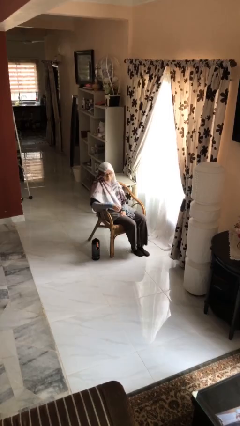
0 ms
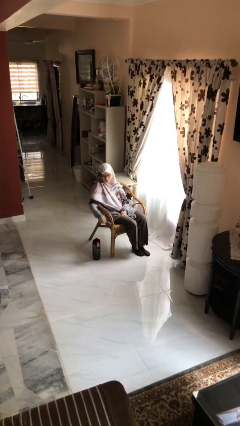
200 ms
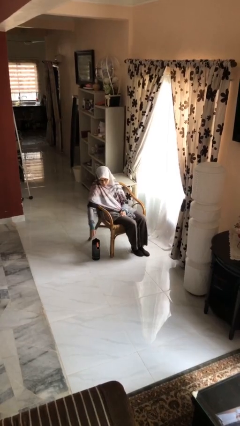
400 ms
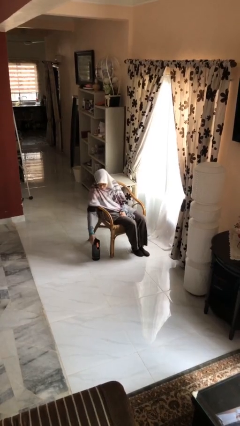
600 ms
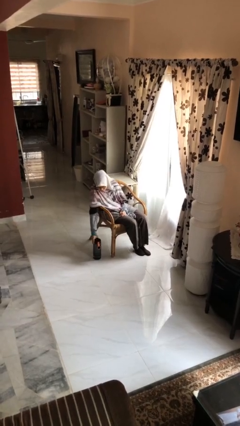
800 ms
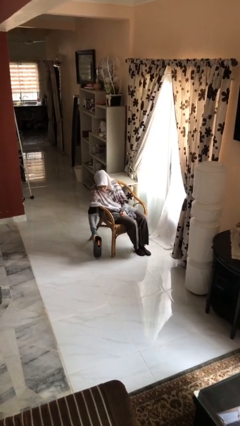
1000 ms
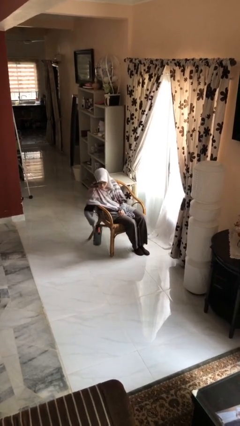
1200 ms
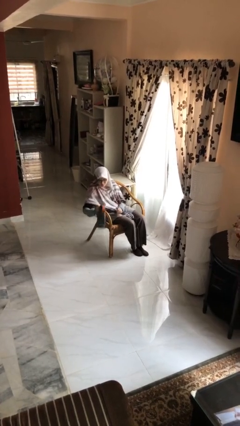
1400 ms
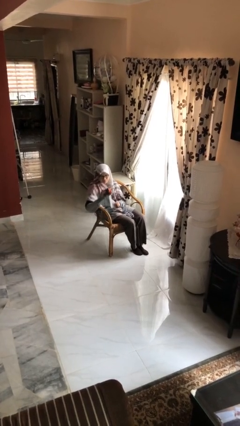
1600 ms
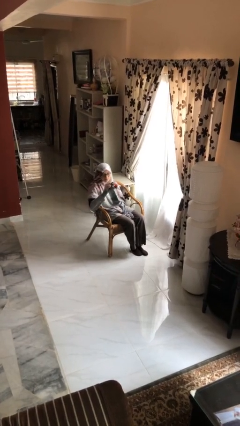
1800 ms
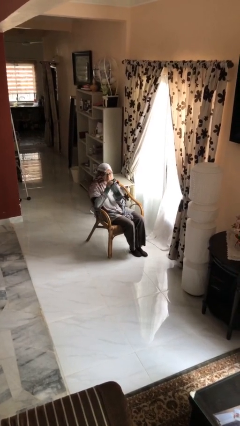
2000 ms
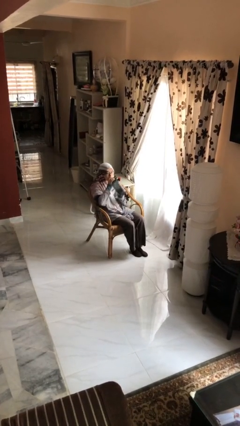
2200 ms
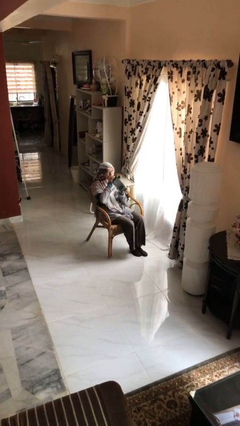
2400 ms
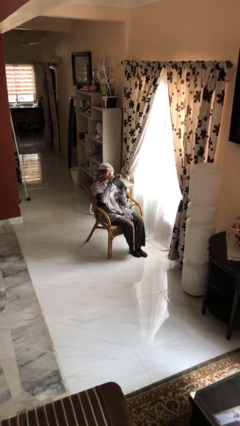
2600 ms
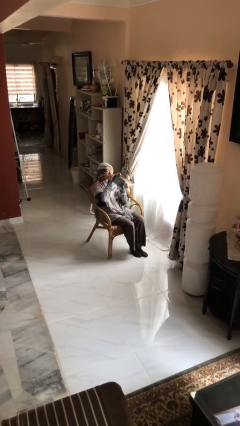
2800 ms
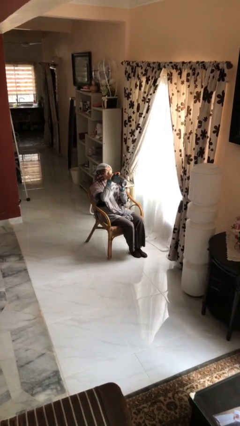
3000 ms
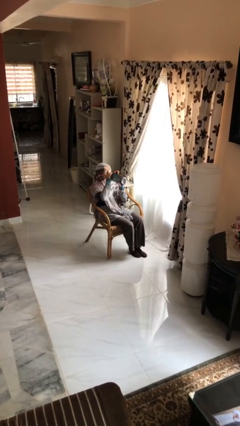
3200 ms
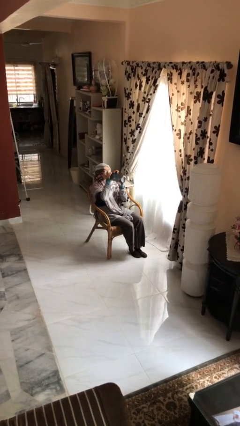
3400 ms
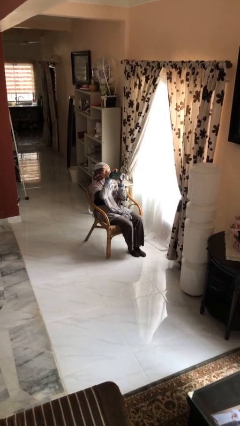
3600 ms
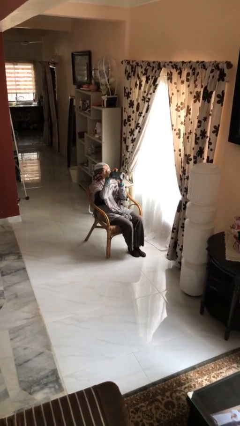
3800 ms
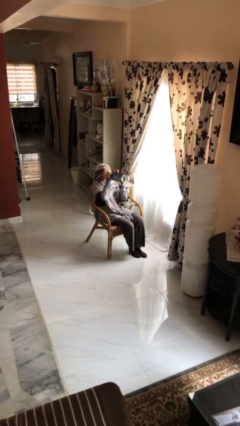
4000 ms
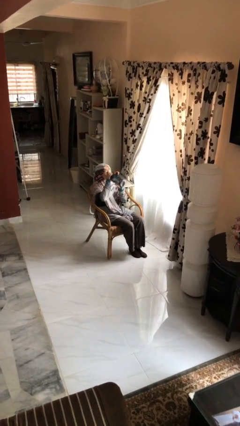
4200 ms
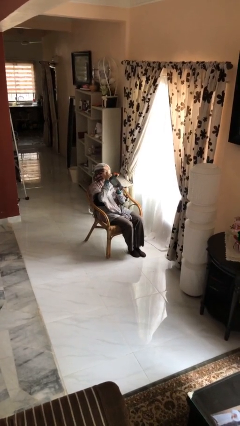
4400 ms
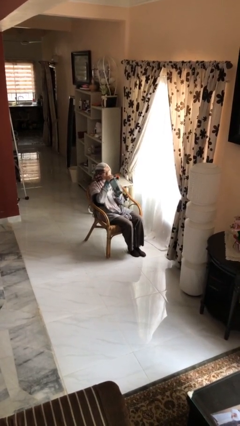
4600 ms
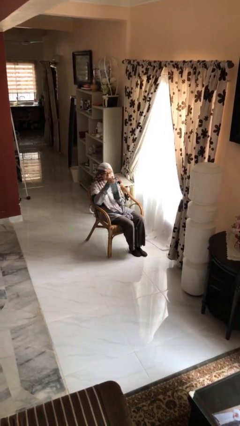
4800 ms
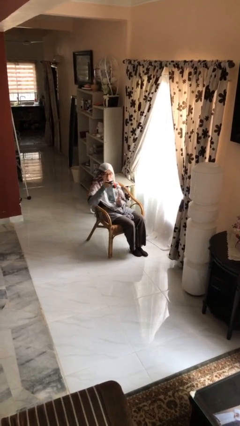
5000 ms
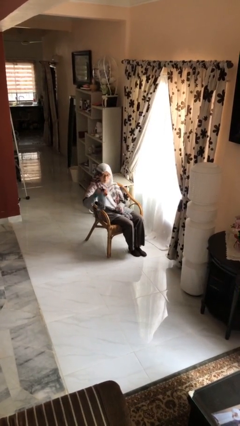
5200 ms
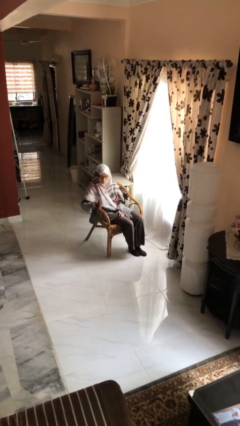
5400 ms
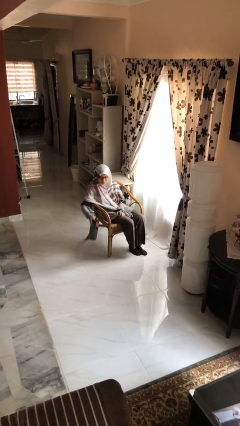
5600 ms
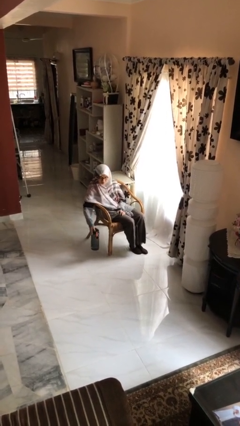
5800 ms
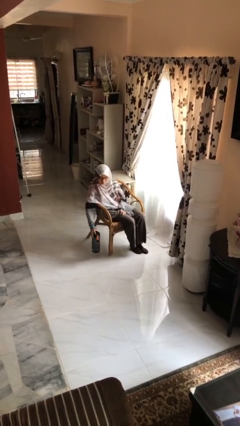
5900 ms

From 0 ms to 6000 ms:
person drinks from bottle

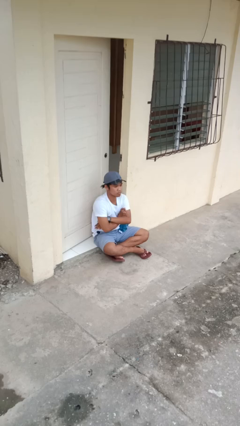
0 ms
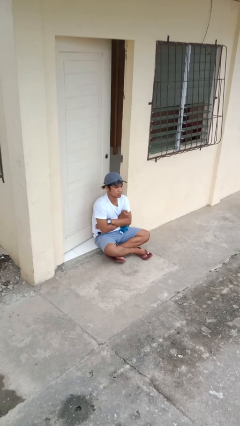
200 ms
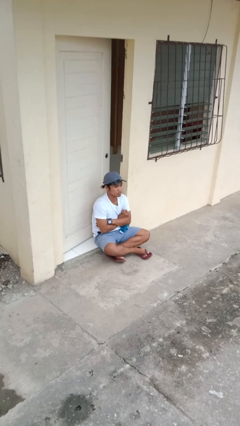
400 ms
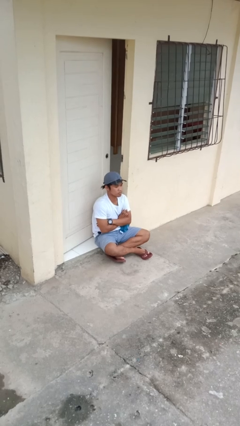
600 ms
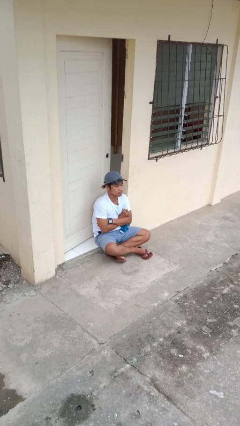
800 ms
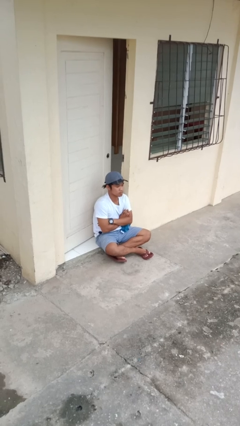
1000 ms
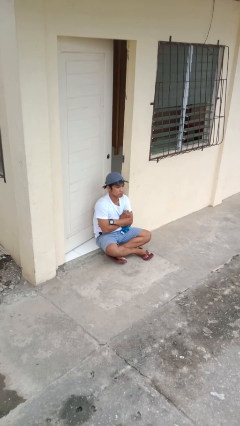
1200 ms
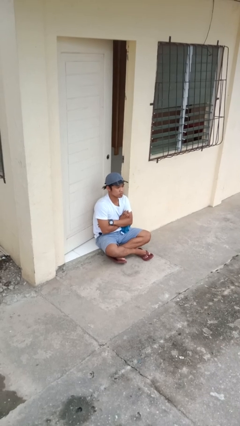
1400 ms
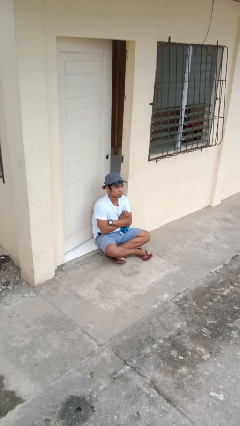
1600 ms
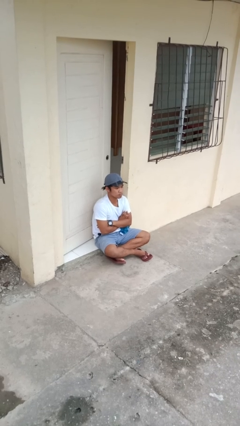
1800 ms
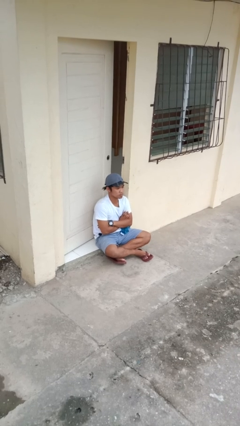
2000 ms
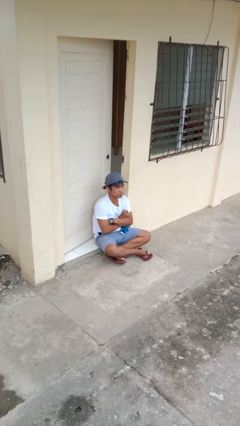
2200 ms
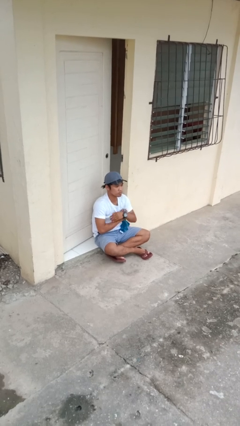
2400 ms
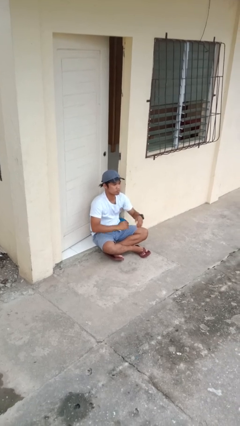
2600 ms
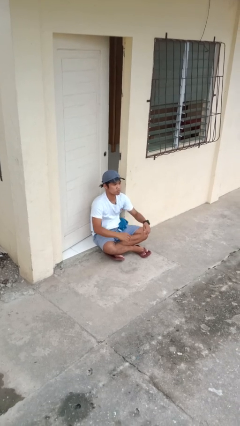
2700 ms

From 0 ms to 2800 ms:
person crosses arms

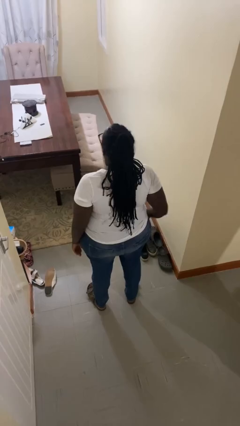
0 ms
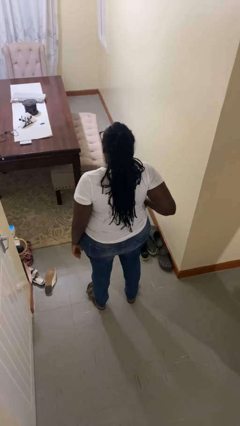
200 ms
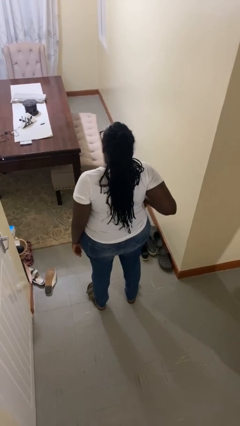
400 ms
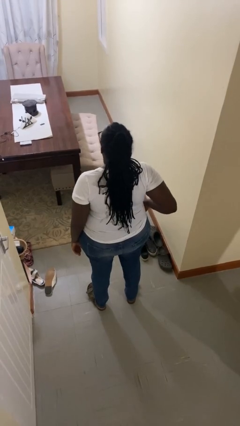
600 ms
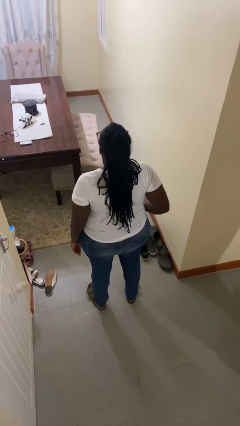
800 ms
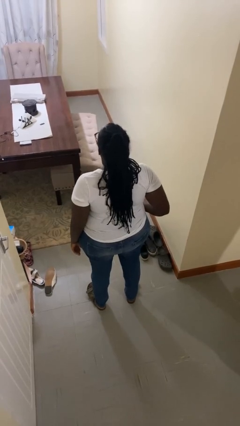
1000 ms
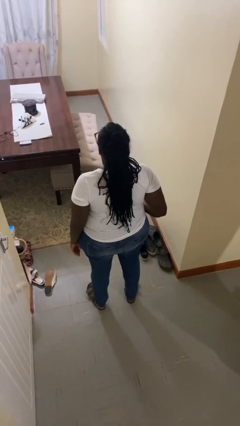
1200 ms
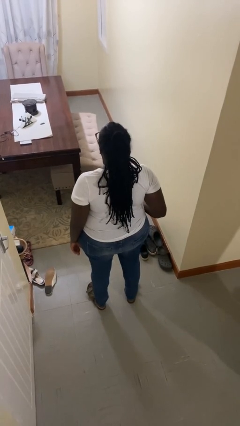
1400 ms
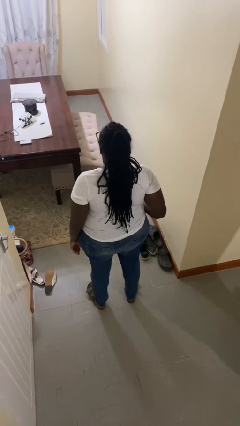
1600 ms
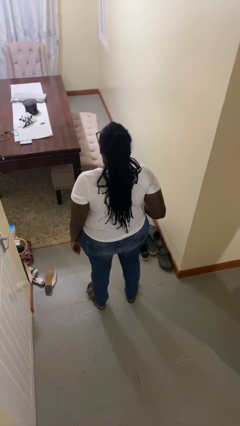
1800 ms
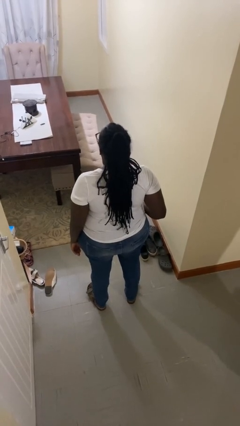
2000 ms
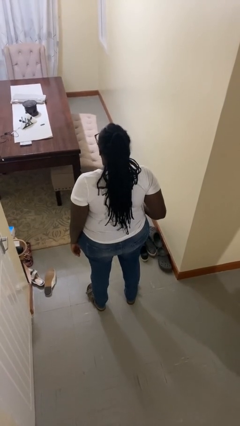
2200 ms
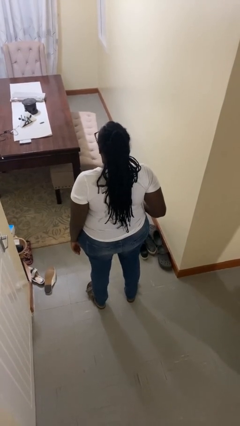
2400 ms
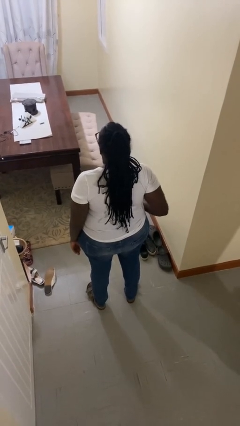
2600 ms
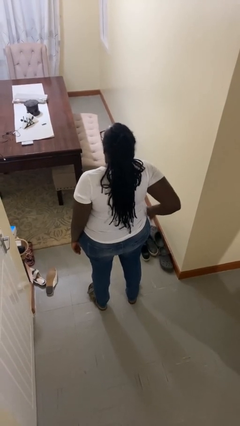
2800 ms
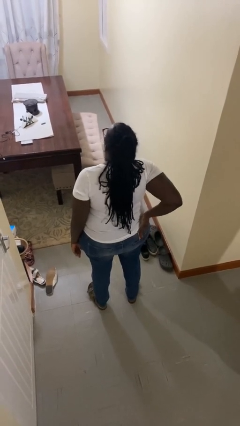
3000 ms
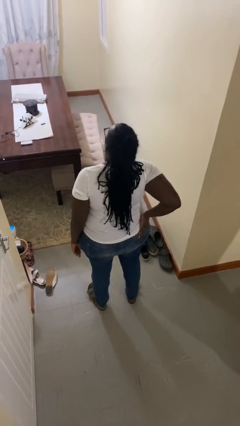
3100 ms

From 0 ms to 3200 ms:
person puts hands in back pockets

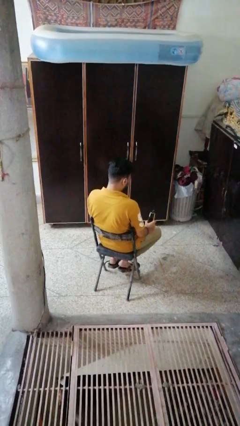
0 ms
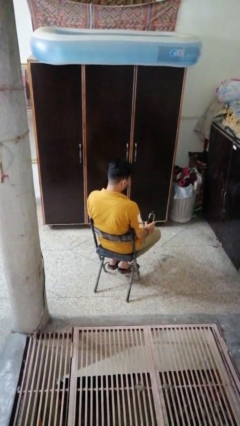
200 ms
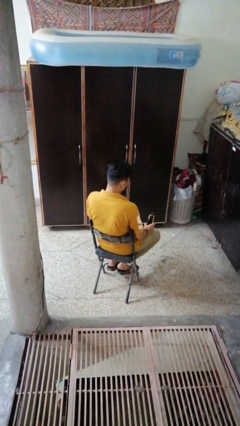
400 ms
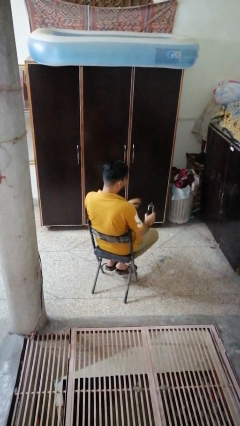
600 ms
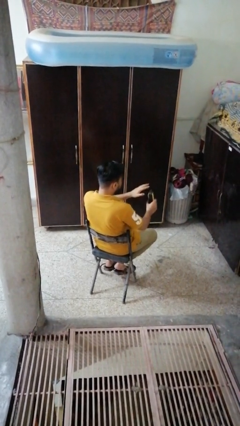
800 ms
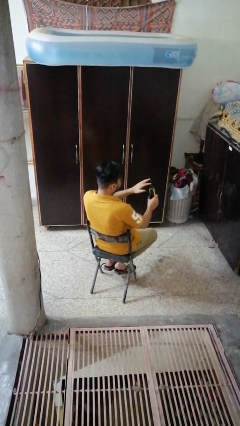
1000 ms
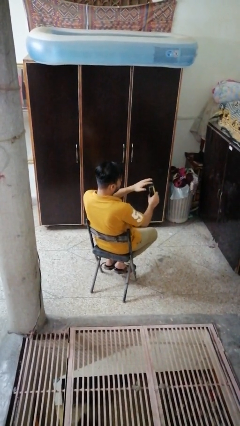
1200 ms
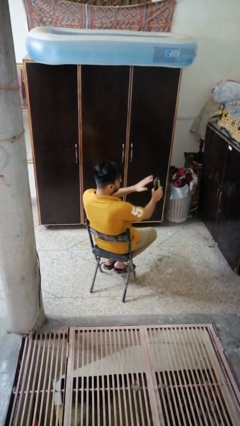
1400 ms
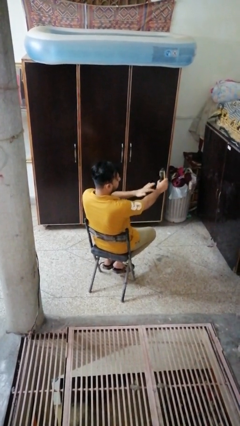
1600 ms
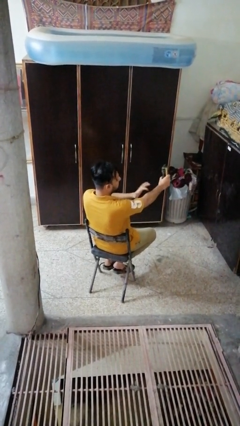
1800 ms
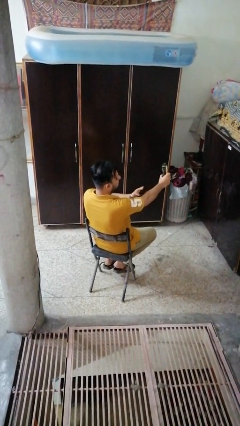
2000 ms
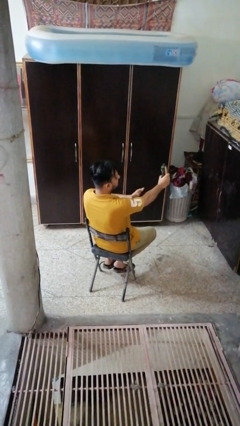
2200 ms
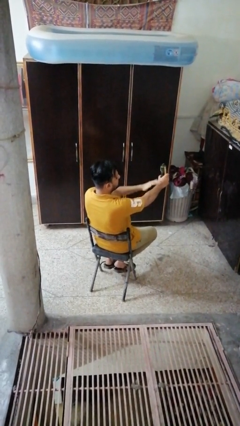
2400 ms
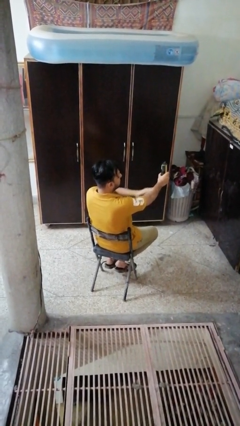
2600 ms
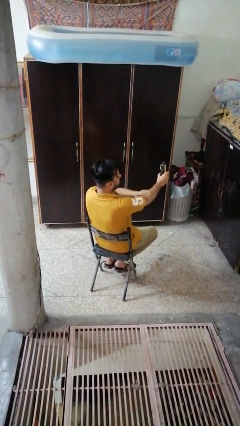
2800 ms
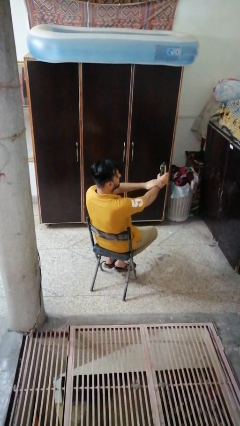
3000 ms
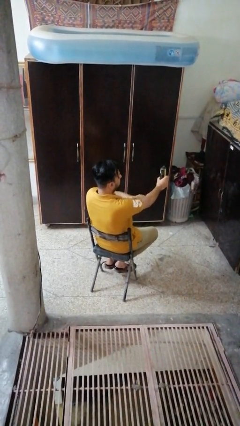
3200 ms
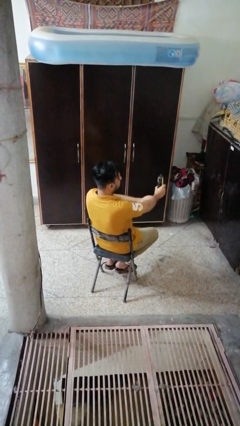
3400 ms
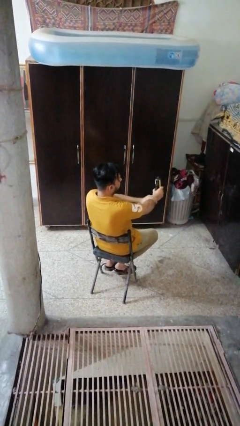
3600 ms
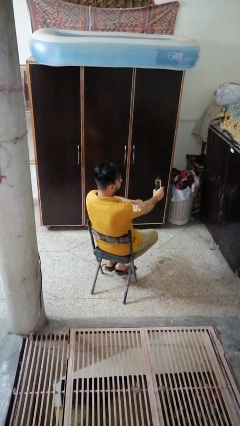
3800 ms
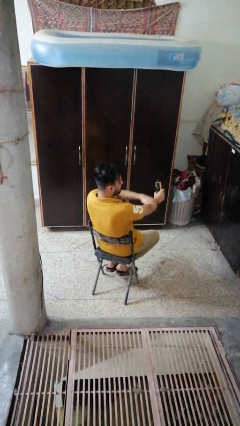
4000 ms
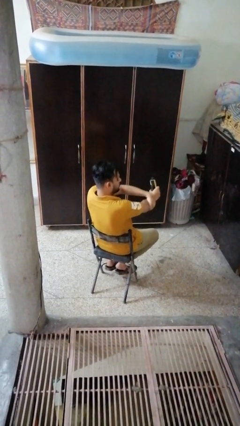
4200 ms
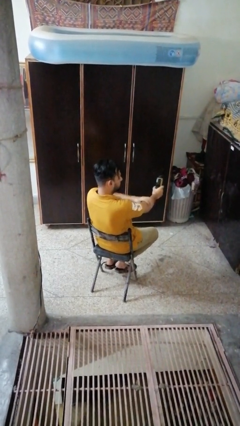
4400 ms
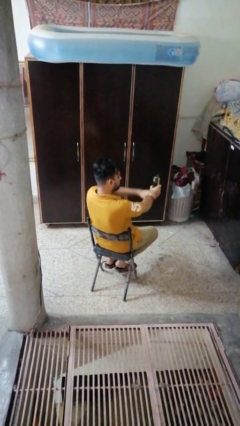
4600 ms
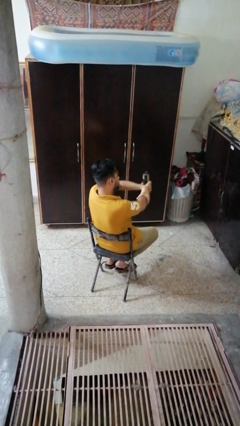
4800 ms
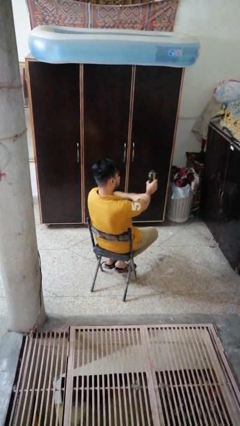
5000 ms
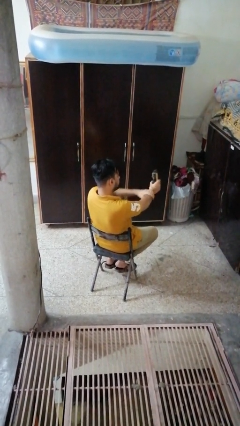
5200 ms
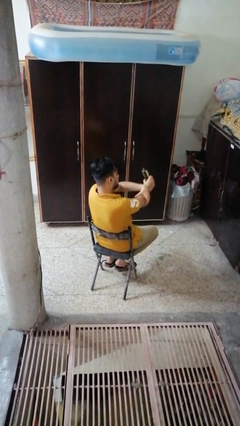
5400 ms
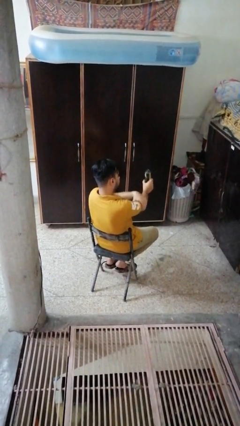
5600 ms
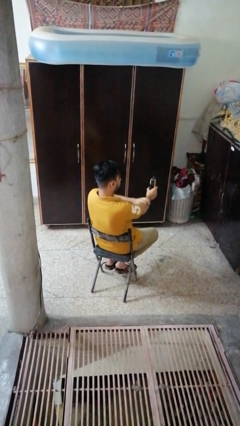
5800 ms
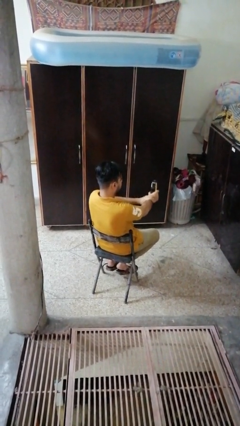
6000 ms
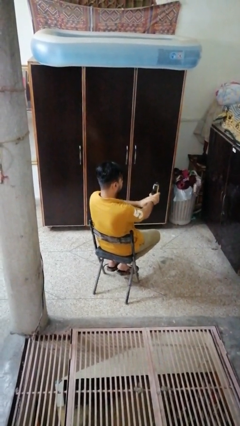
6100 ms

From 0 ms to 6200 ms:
person applies sunscreen
